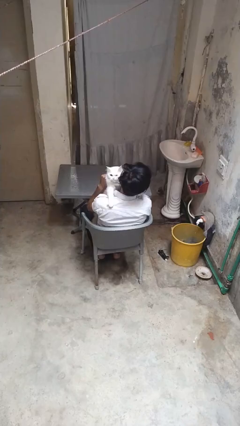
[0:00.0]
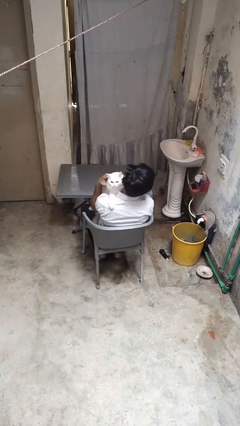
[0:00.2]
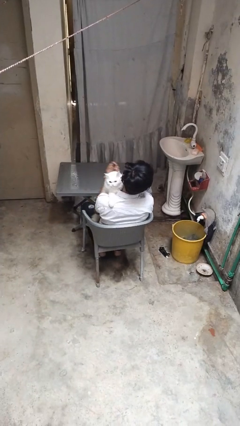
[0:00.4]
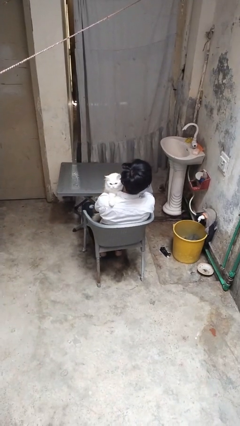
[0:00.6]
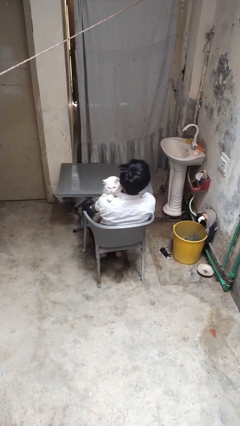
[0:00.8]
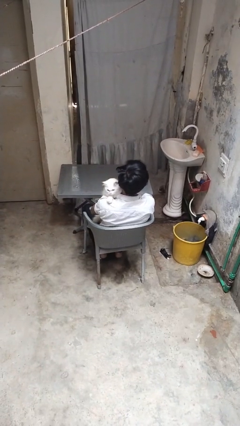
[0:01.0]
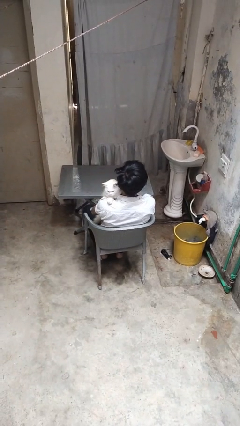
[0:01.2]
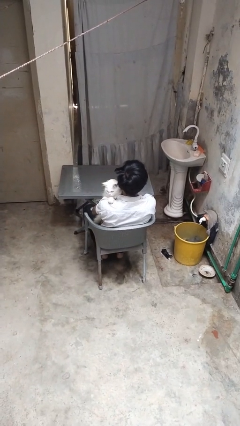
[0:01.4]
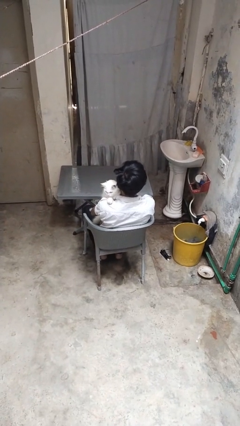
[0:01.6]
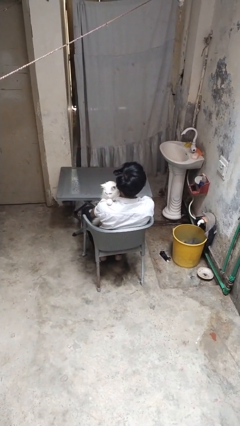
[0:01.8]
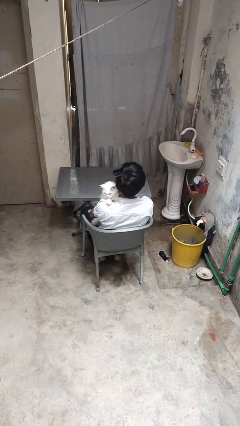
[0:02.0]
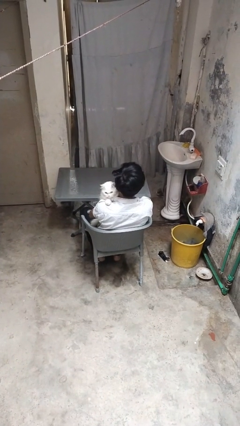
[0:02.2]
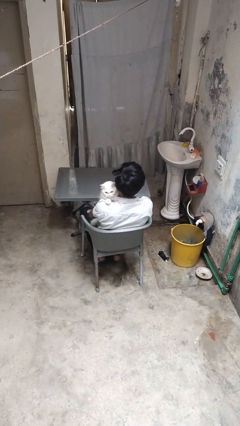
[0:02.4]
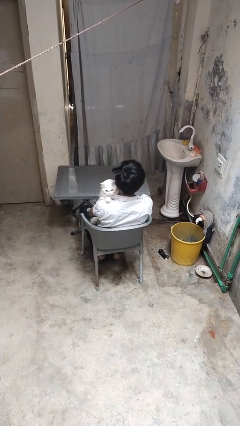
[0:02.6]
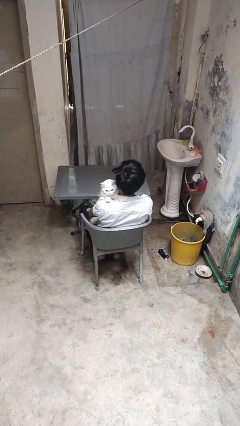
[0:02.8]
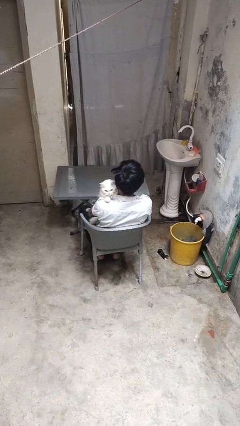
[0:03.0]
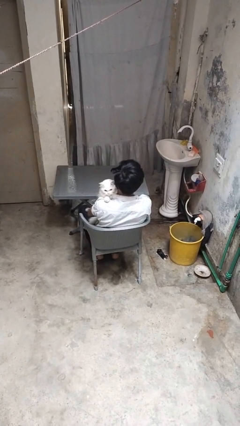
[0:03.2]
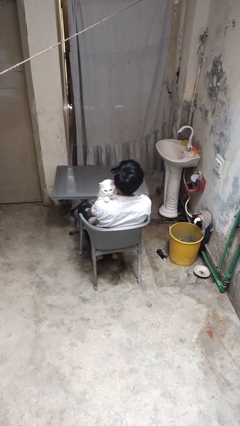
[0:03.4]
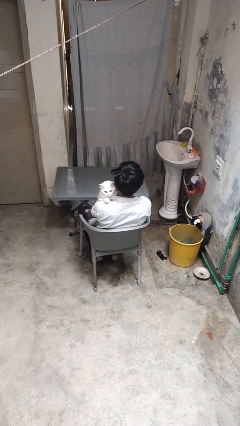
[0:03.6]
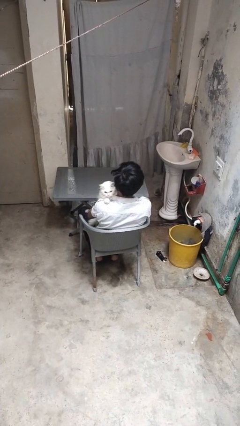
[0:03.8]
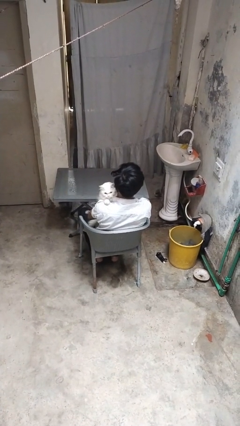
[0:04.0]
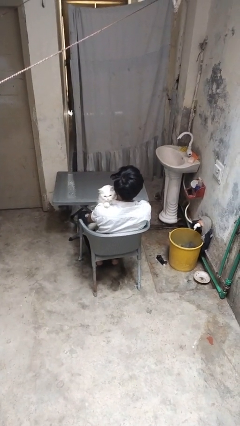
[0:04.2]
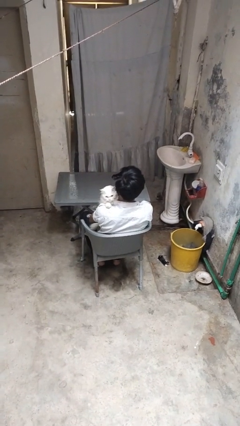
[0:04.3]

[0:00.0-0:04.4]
person hugs cat

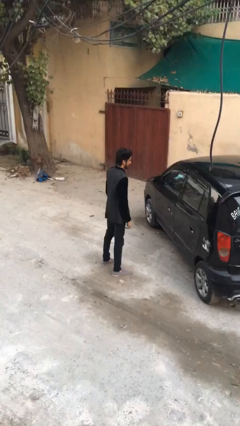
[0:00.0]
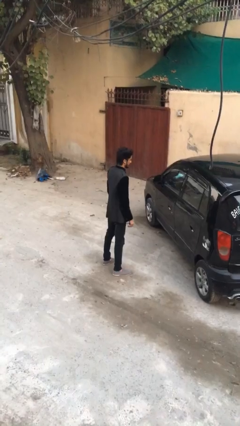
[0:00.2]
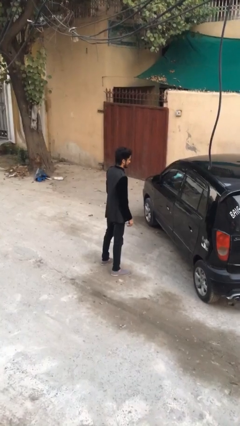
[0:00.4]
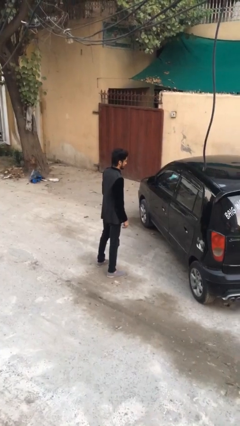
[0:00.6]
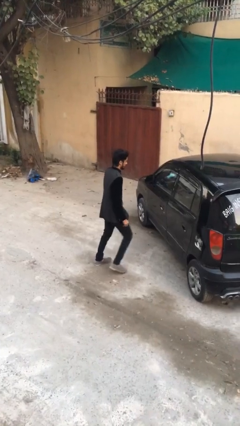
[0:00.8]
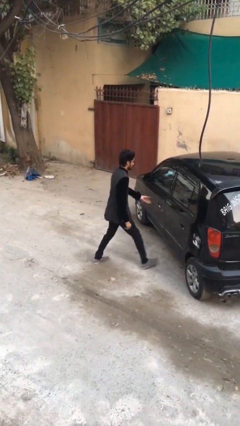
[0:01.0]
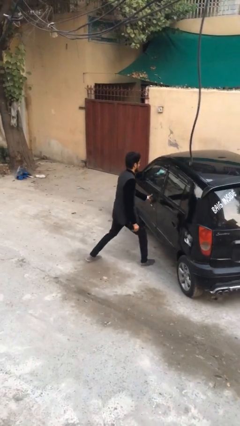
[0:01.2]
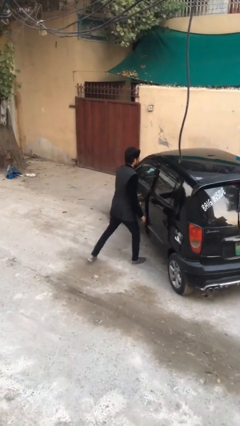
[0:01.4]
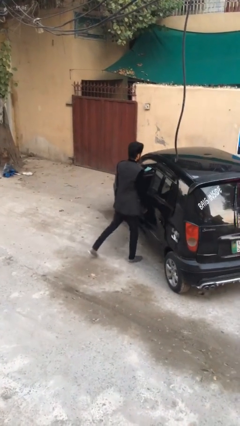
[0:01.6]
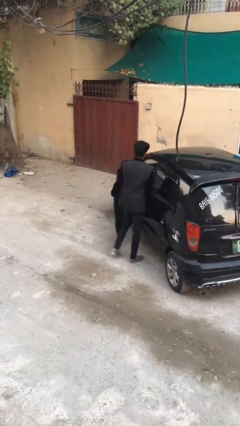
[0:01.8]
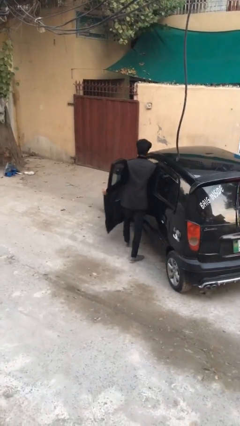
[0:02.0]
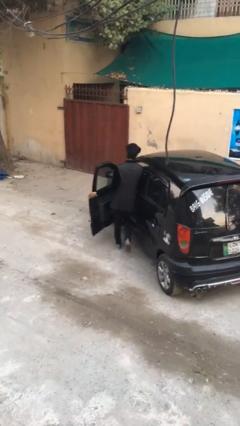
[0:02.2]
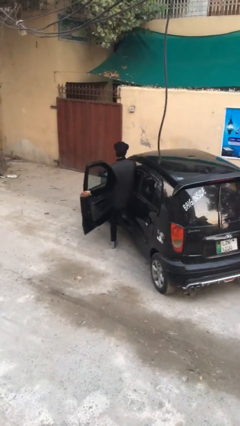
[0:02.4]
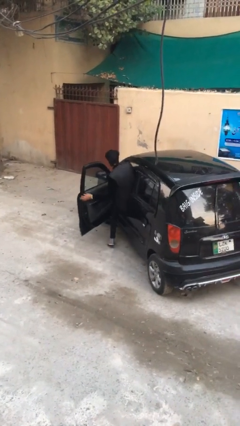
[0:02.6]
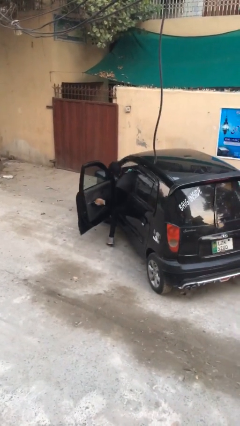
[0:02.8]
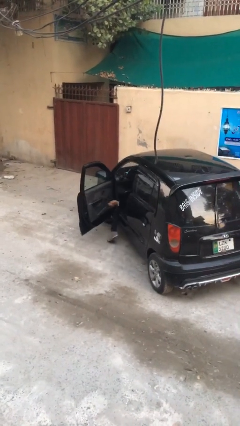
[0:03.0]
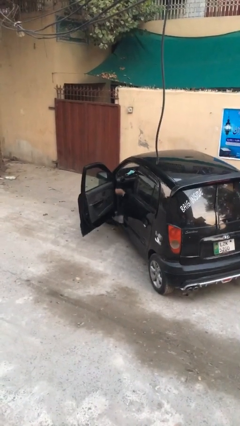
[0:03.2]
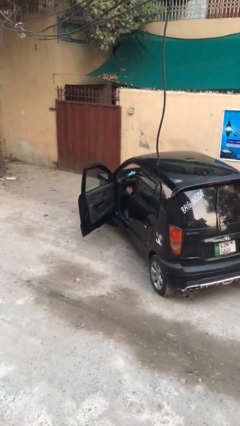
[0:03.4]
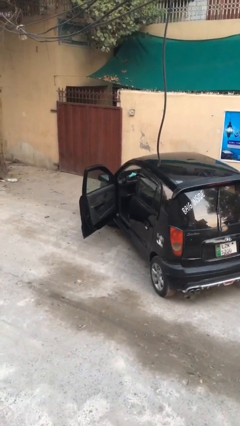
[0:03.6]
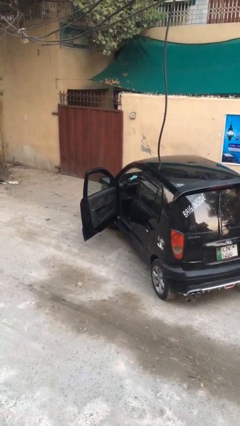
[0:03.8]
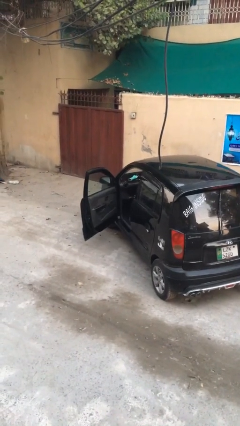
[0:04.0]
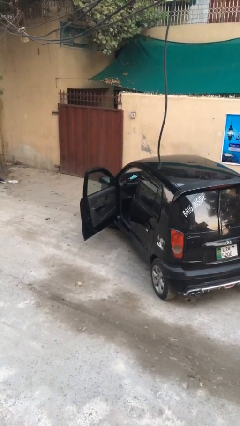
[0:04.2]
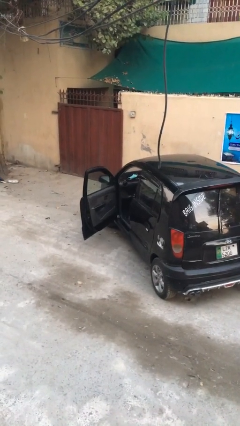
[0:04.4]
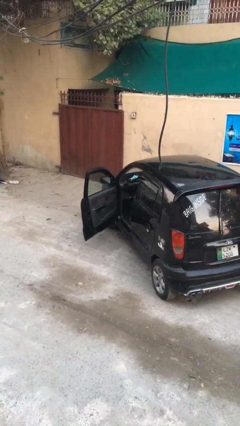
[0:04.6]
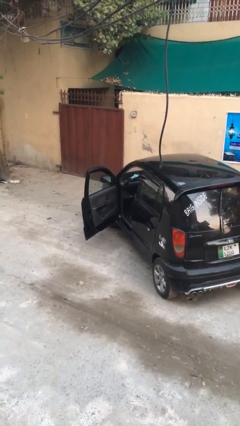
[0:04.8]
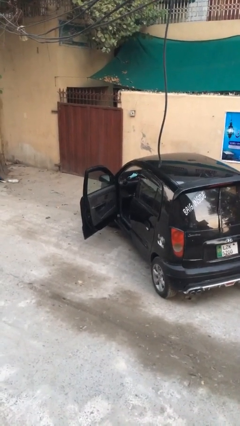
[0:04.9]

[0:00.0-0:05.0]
person enters car

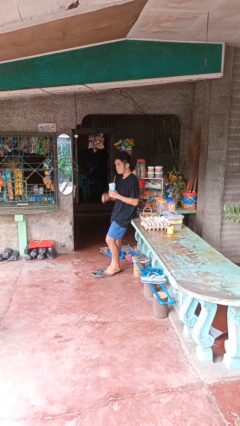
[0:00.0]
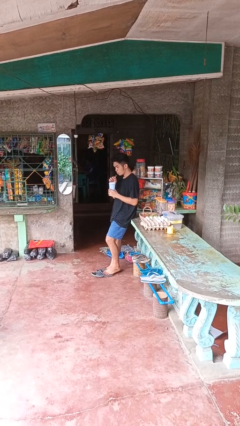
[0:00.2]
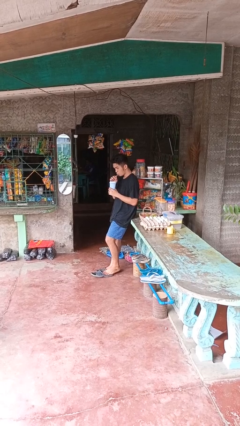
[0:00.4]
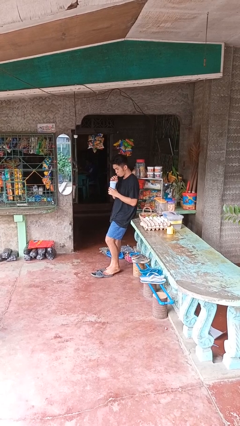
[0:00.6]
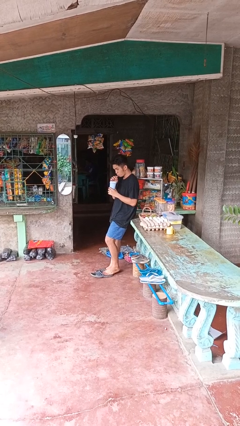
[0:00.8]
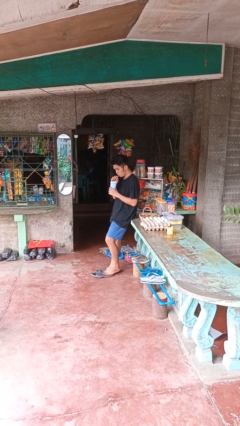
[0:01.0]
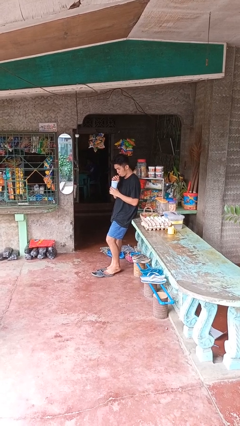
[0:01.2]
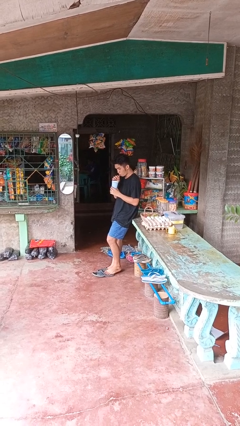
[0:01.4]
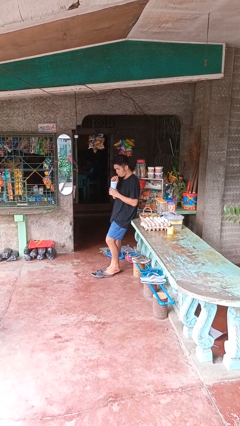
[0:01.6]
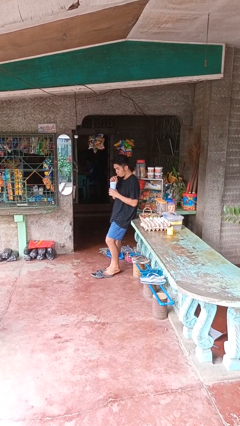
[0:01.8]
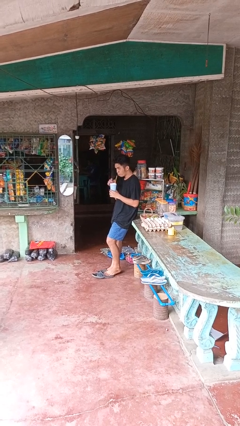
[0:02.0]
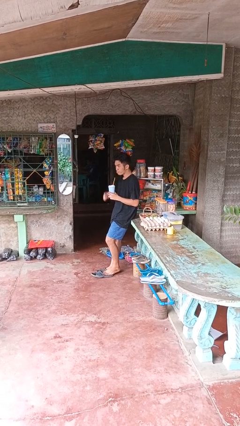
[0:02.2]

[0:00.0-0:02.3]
person drinks from straw

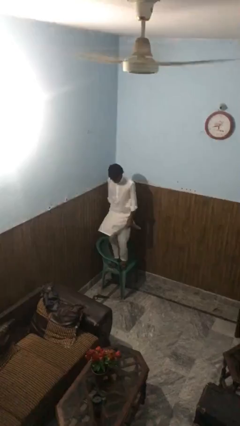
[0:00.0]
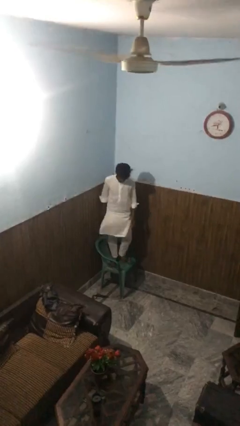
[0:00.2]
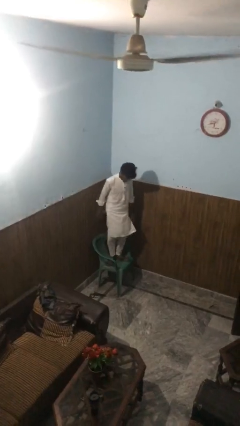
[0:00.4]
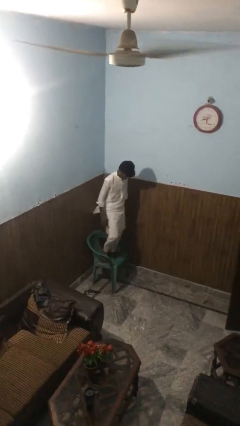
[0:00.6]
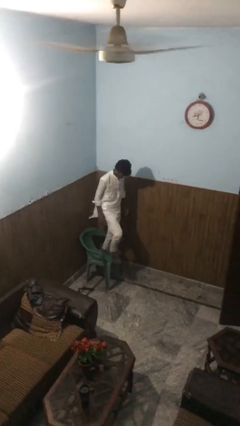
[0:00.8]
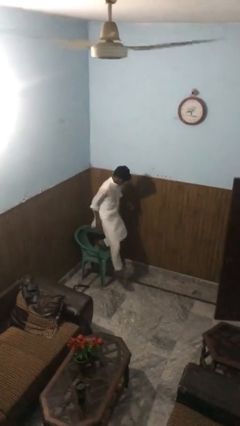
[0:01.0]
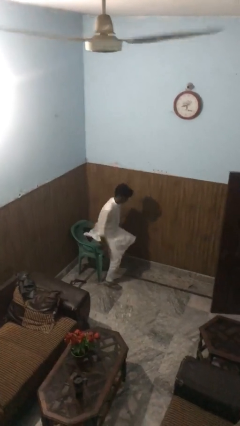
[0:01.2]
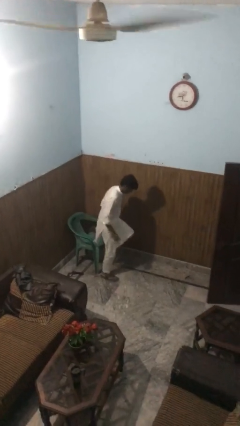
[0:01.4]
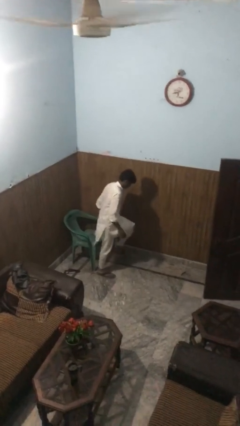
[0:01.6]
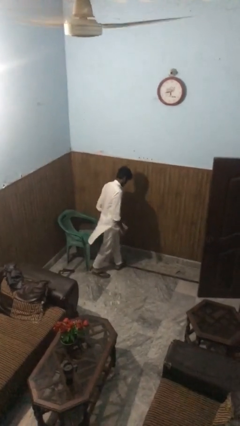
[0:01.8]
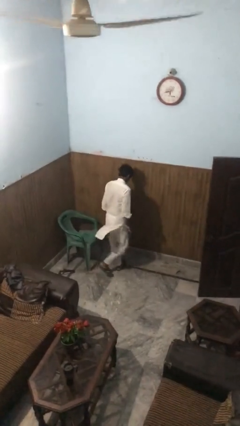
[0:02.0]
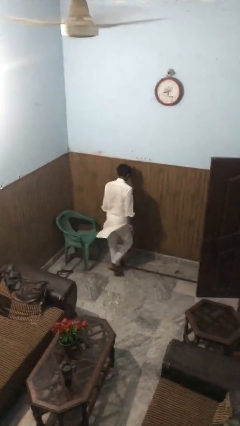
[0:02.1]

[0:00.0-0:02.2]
person climbs off chair

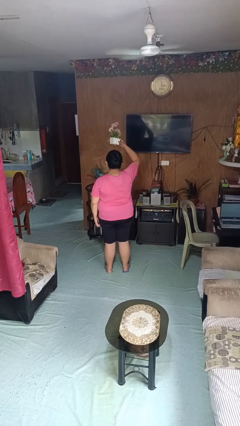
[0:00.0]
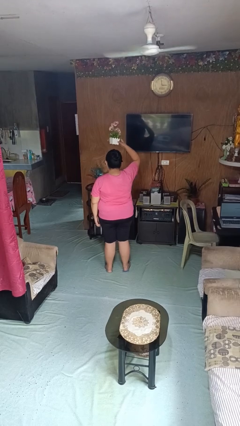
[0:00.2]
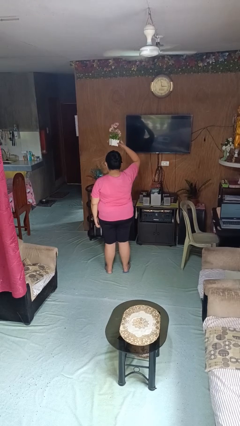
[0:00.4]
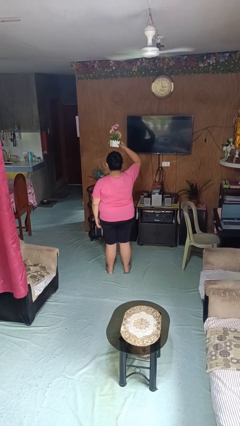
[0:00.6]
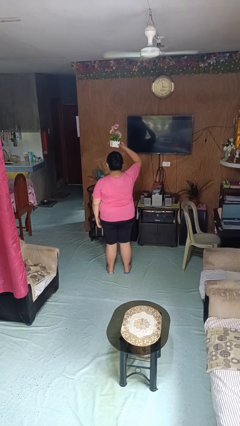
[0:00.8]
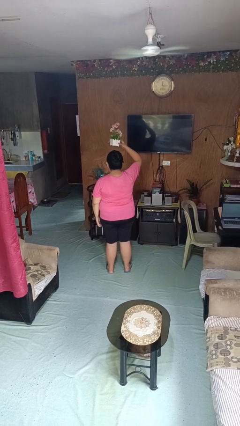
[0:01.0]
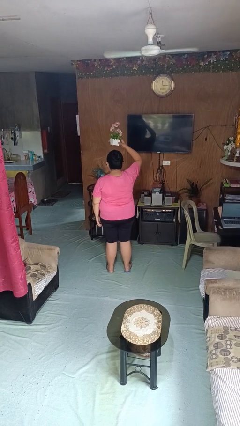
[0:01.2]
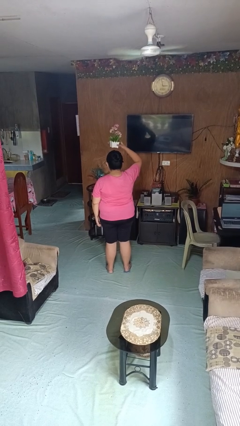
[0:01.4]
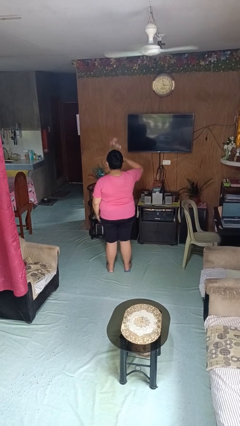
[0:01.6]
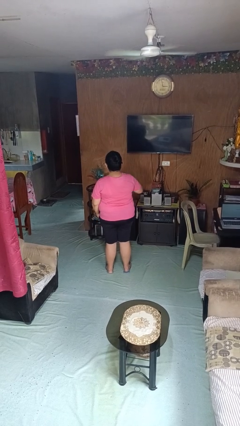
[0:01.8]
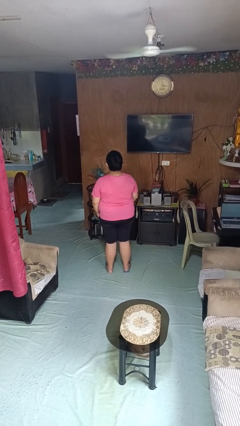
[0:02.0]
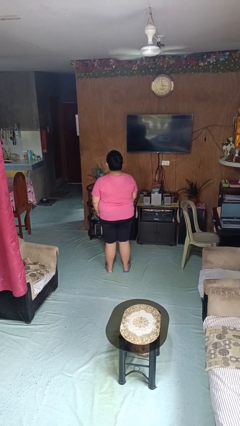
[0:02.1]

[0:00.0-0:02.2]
person holds object above head

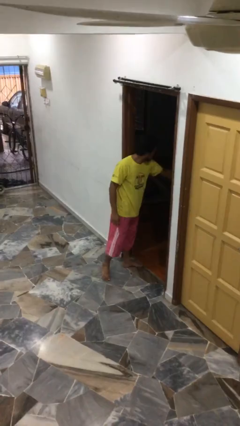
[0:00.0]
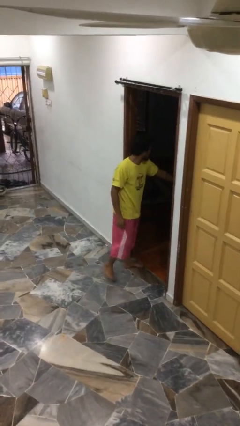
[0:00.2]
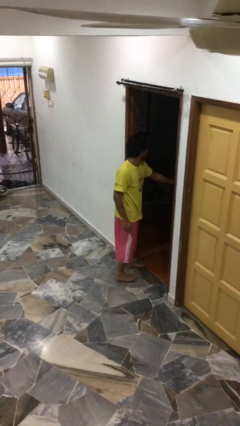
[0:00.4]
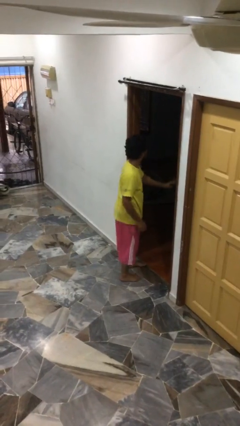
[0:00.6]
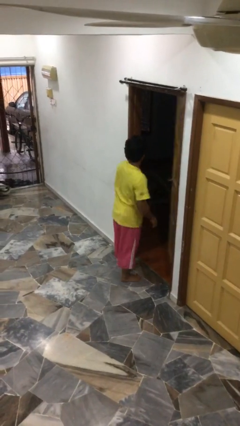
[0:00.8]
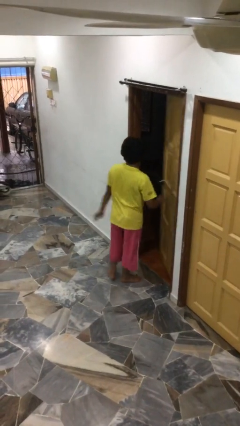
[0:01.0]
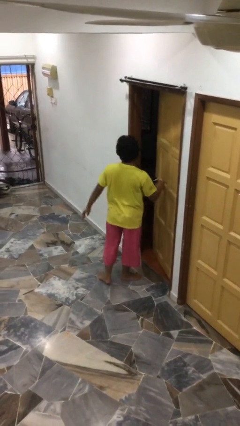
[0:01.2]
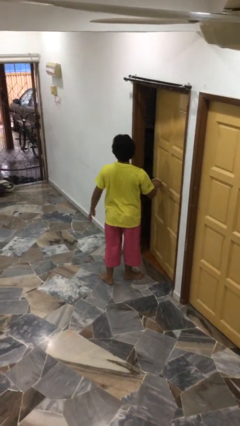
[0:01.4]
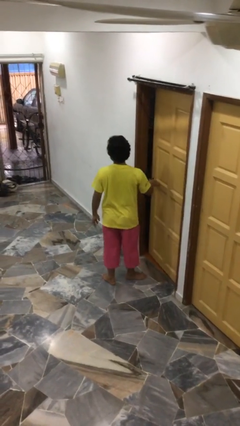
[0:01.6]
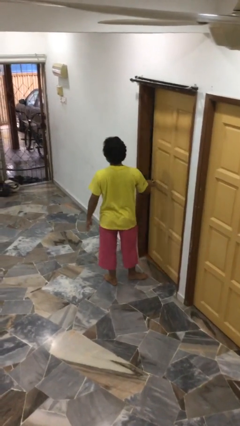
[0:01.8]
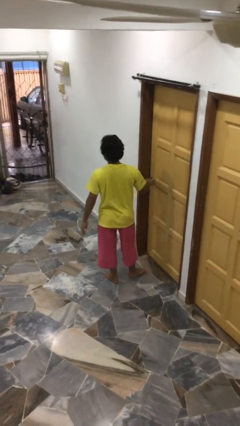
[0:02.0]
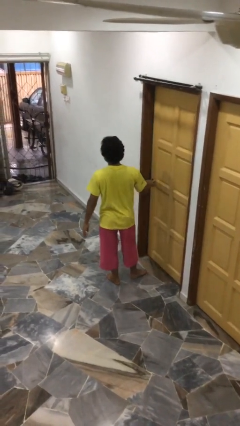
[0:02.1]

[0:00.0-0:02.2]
person closes facility door
